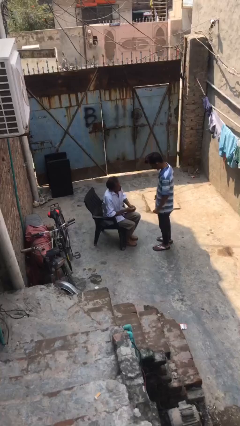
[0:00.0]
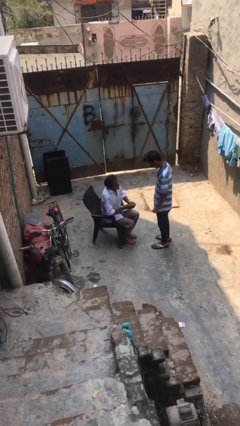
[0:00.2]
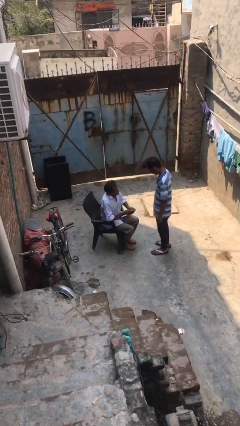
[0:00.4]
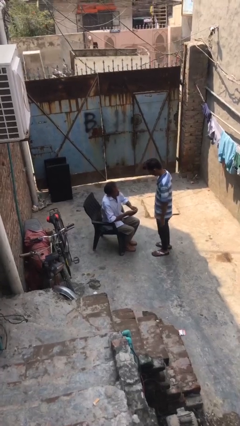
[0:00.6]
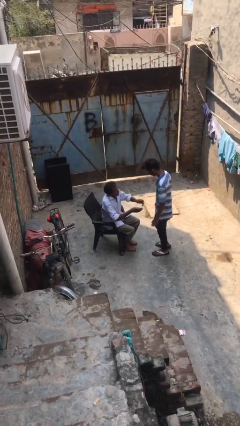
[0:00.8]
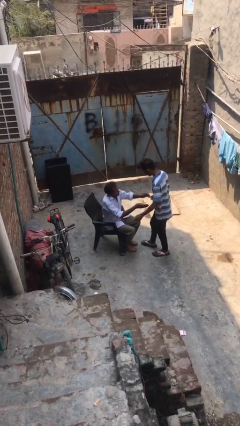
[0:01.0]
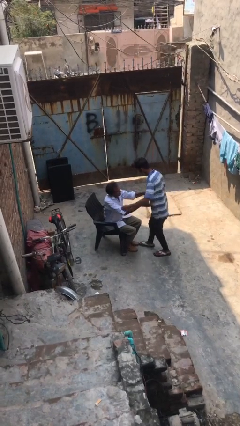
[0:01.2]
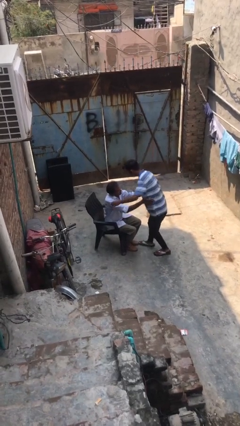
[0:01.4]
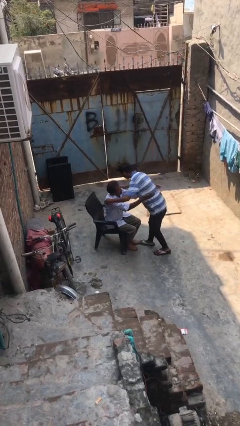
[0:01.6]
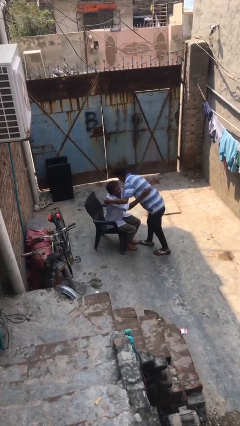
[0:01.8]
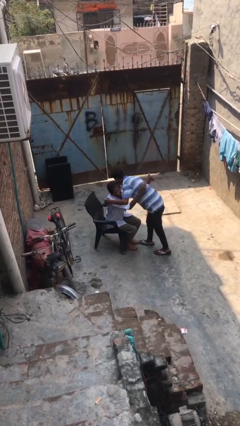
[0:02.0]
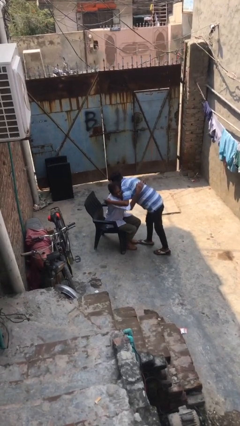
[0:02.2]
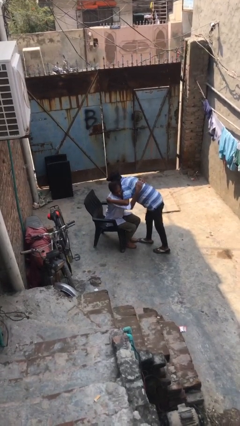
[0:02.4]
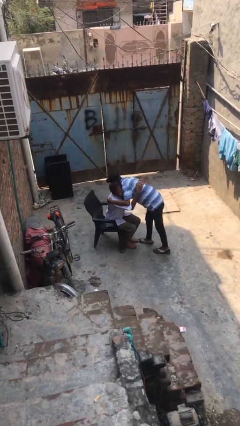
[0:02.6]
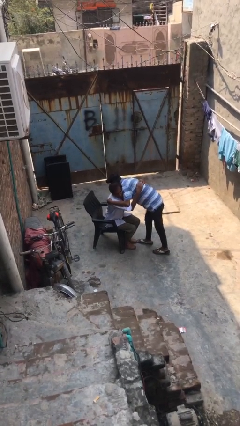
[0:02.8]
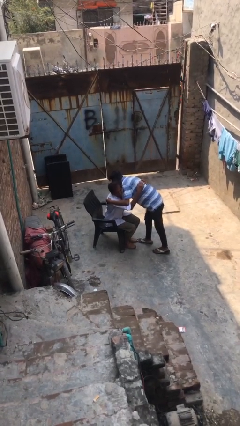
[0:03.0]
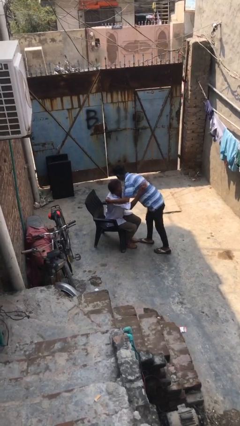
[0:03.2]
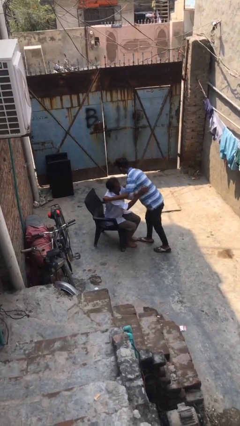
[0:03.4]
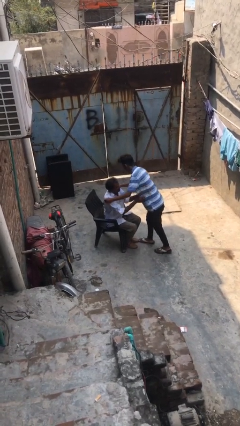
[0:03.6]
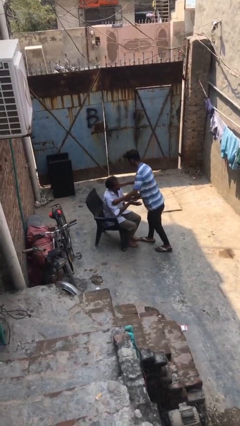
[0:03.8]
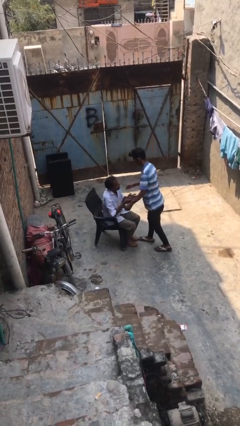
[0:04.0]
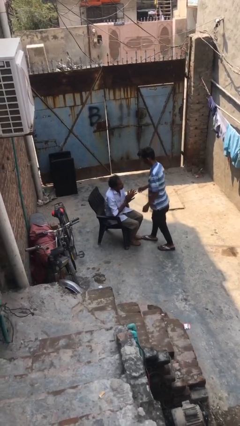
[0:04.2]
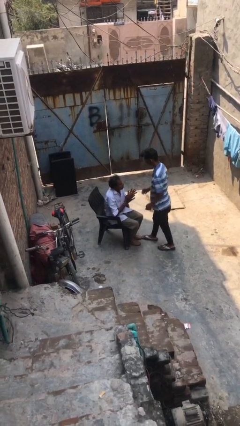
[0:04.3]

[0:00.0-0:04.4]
person embraces person

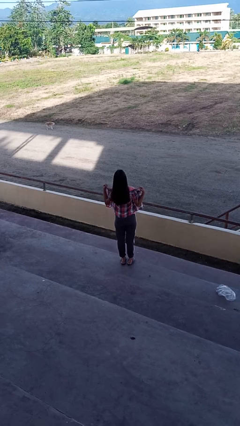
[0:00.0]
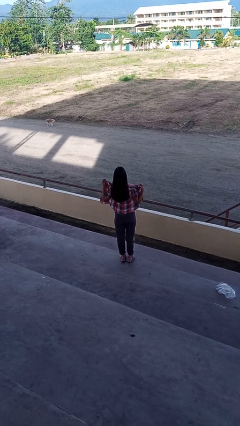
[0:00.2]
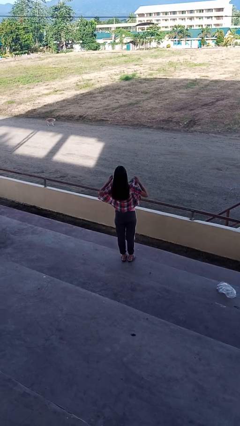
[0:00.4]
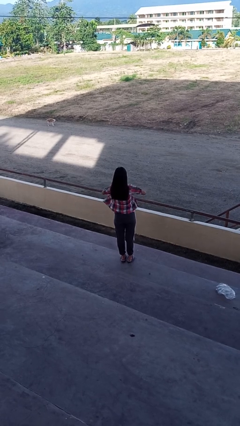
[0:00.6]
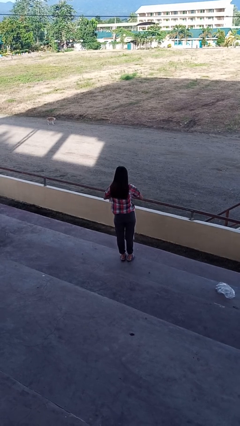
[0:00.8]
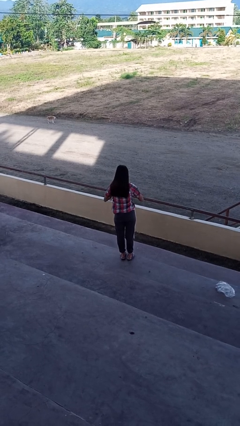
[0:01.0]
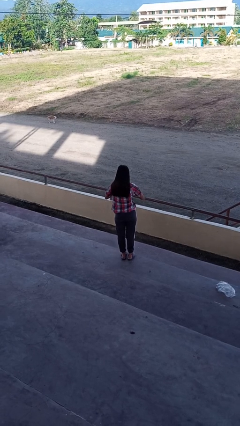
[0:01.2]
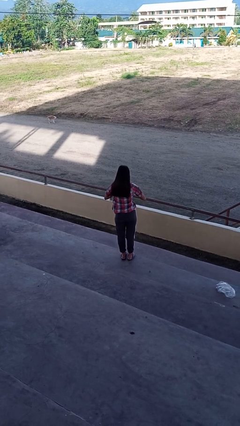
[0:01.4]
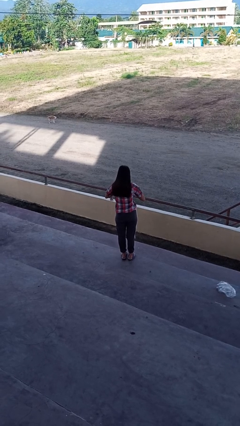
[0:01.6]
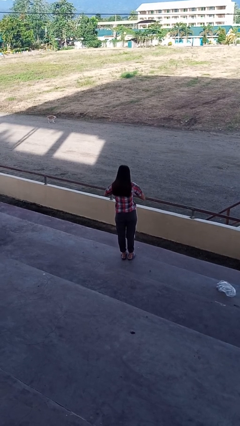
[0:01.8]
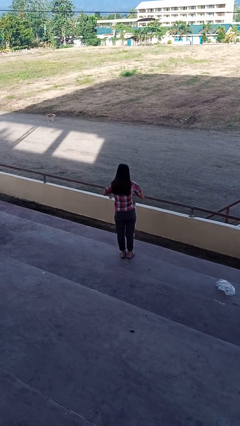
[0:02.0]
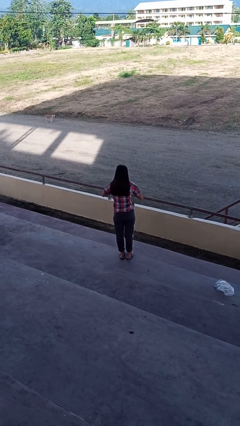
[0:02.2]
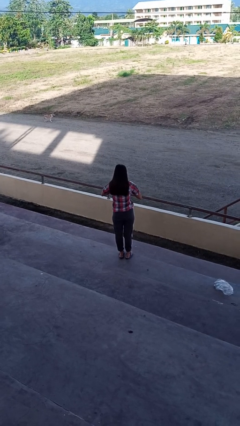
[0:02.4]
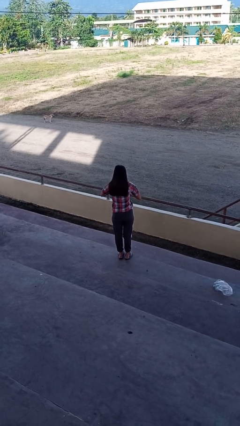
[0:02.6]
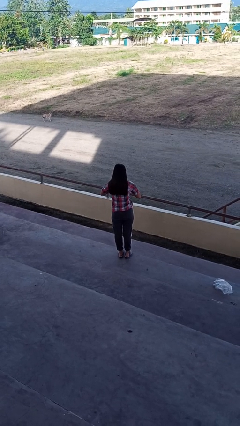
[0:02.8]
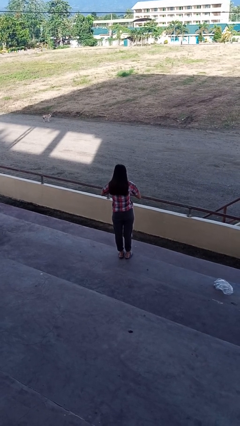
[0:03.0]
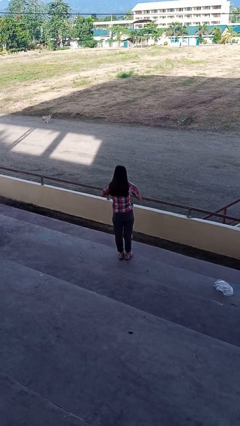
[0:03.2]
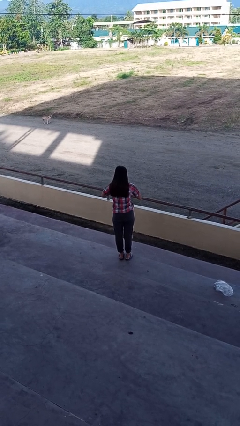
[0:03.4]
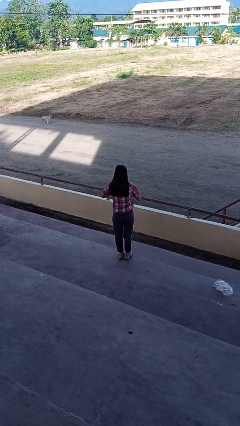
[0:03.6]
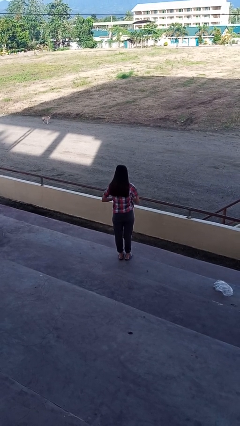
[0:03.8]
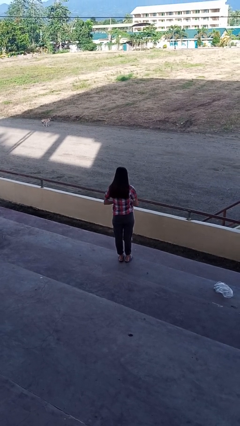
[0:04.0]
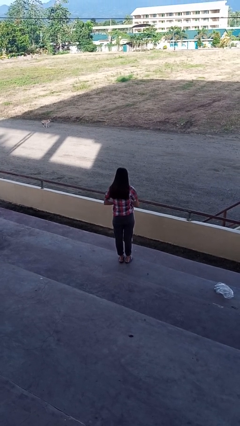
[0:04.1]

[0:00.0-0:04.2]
person buttons shirt

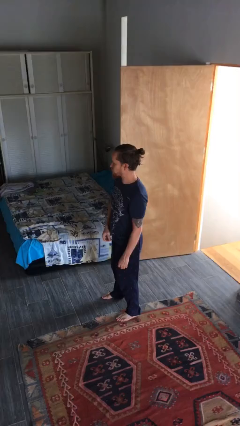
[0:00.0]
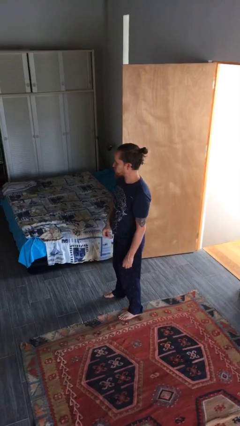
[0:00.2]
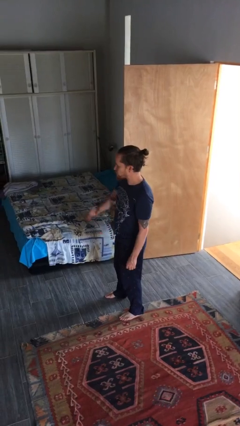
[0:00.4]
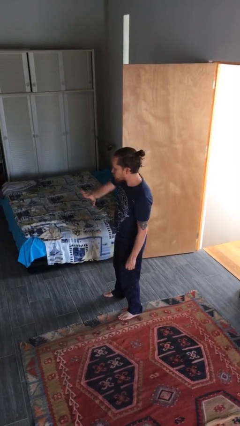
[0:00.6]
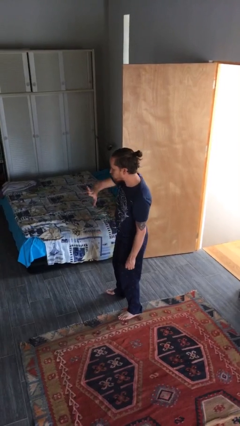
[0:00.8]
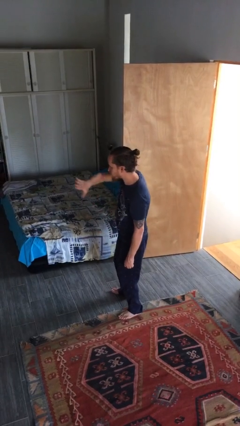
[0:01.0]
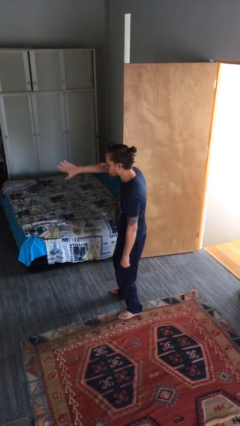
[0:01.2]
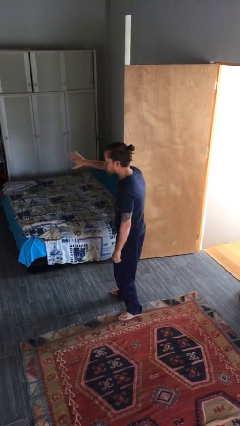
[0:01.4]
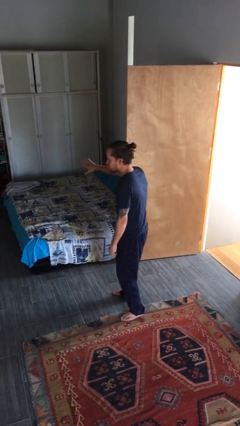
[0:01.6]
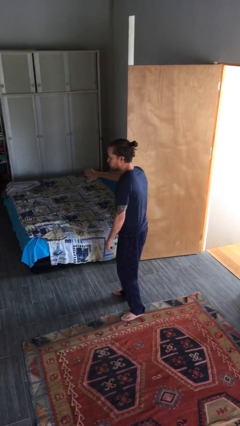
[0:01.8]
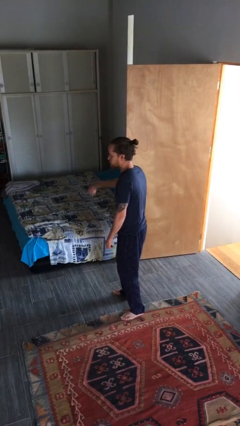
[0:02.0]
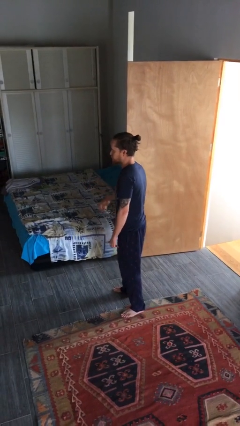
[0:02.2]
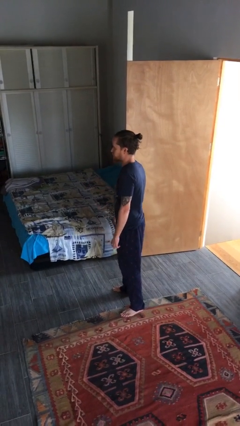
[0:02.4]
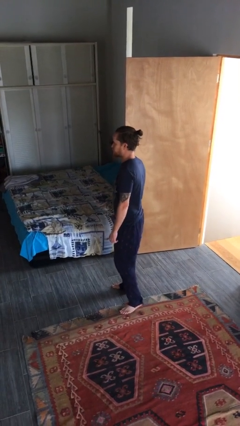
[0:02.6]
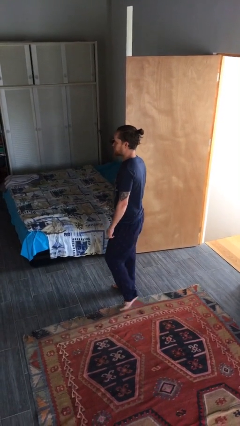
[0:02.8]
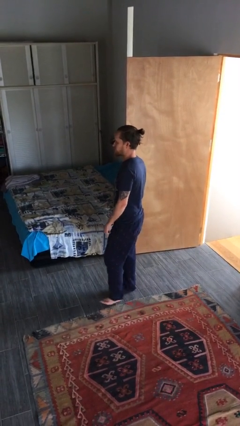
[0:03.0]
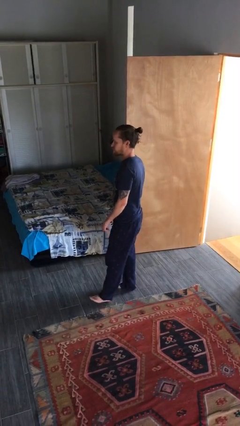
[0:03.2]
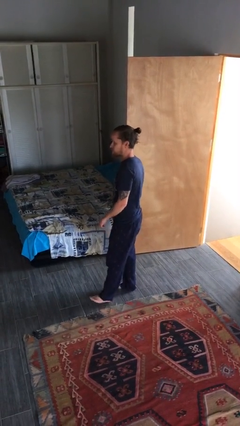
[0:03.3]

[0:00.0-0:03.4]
person gestures swipe right

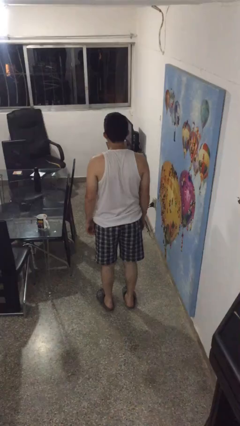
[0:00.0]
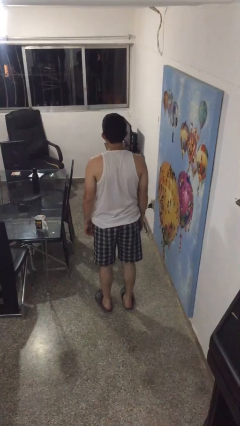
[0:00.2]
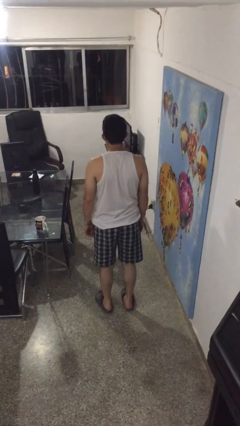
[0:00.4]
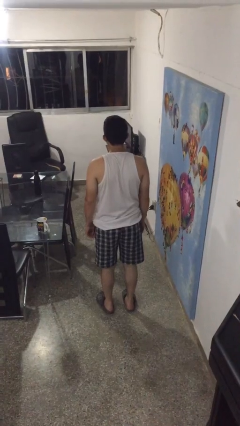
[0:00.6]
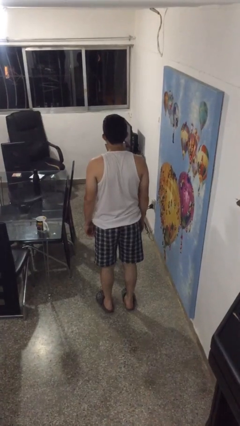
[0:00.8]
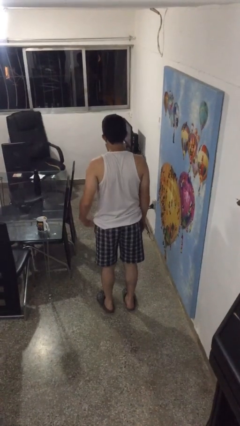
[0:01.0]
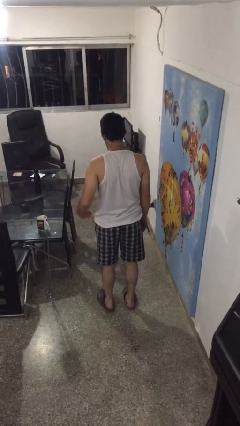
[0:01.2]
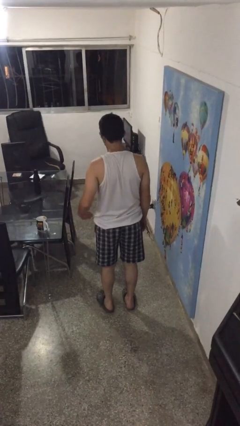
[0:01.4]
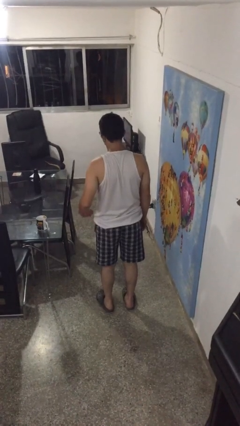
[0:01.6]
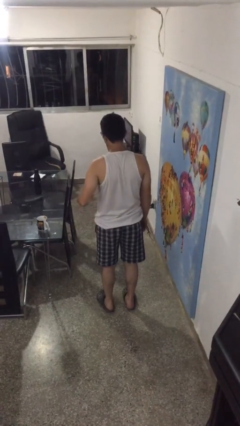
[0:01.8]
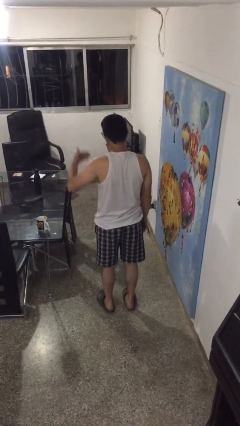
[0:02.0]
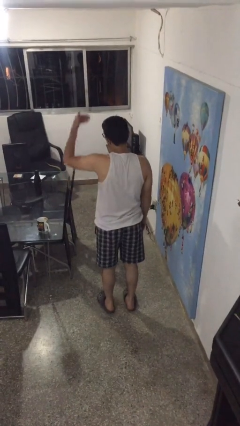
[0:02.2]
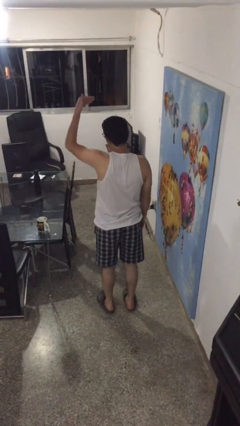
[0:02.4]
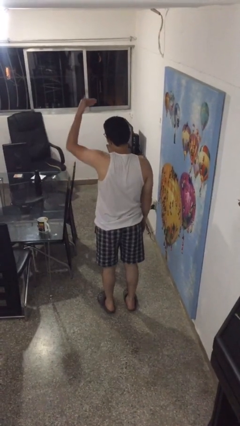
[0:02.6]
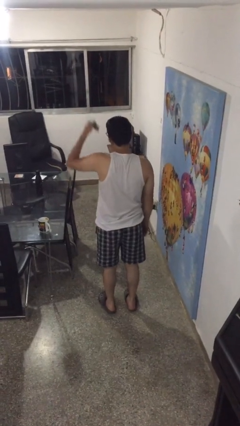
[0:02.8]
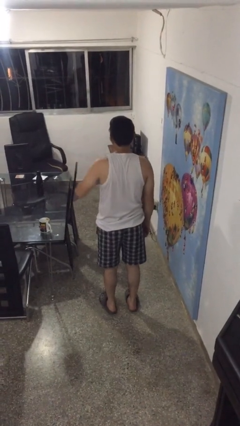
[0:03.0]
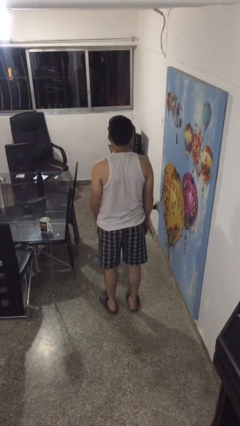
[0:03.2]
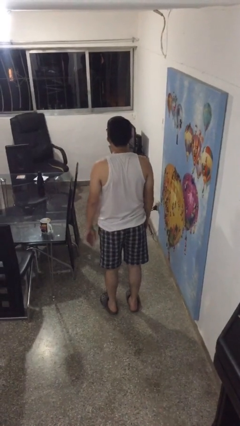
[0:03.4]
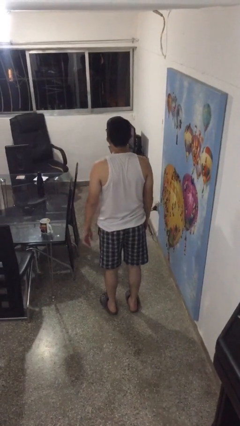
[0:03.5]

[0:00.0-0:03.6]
person gestures swipe up

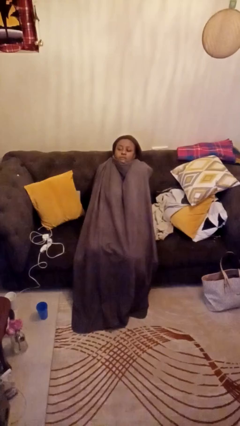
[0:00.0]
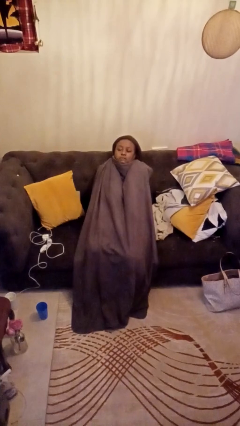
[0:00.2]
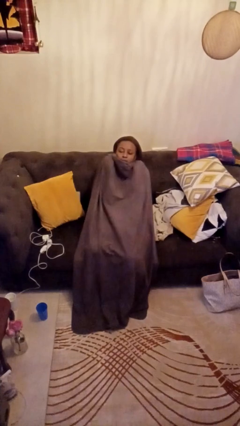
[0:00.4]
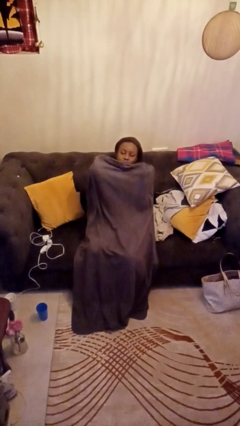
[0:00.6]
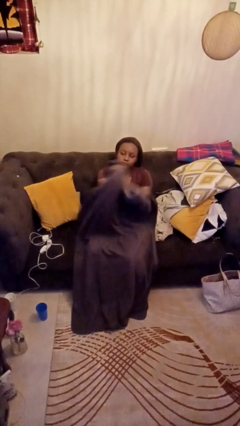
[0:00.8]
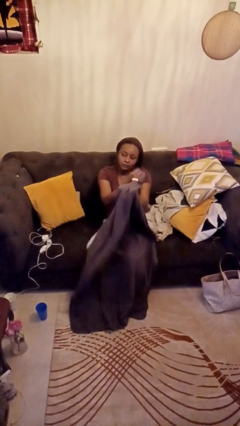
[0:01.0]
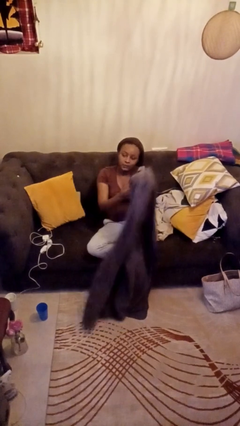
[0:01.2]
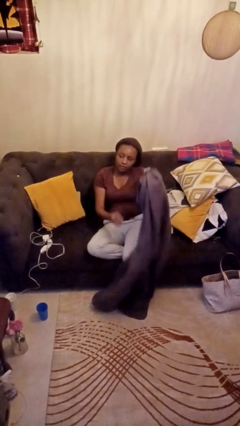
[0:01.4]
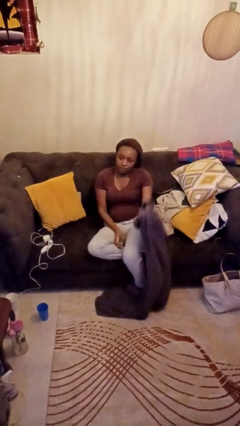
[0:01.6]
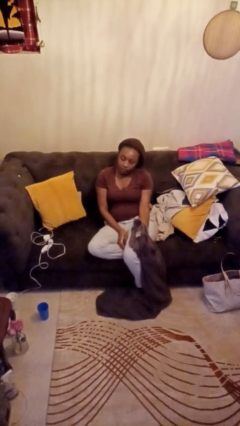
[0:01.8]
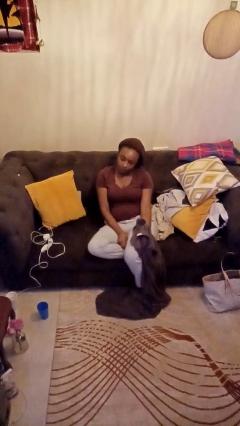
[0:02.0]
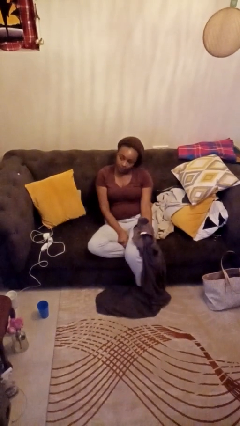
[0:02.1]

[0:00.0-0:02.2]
person uncovers with blanket
